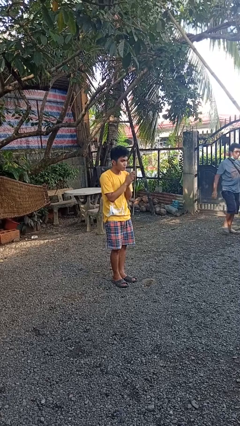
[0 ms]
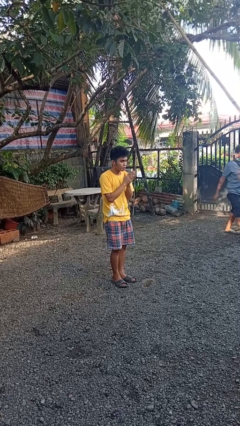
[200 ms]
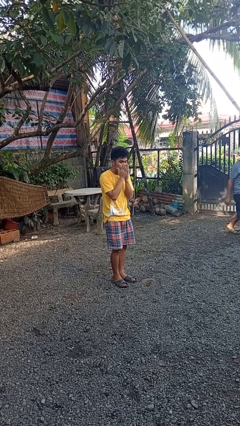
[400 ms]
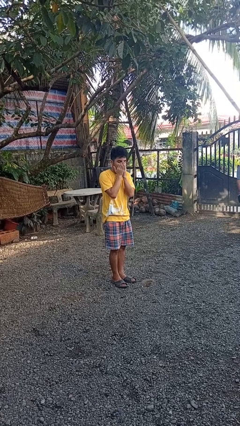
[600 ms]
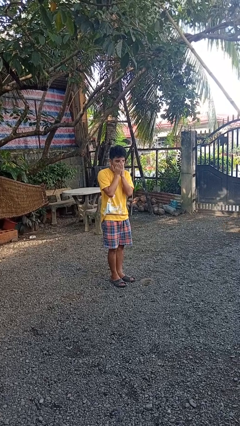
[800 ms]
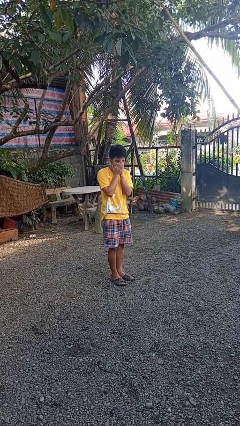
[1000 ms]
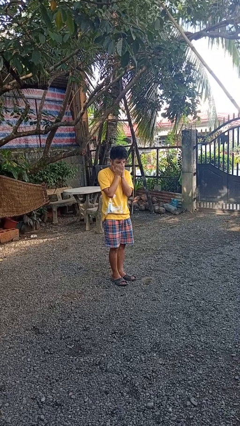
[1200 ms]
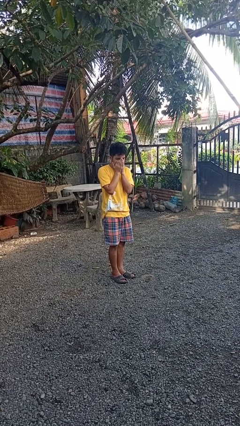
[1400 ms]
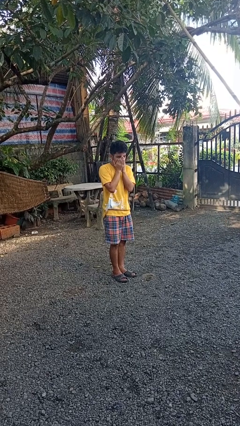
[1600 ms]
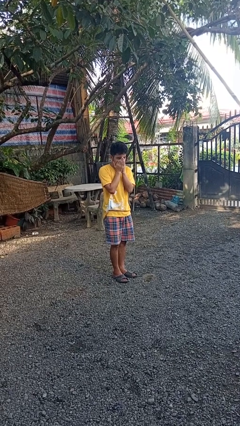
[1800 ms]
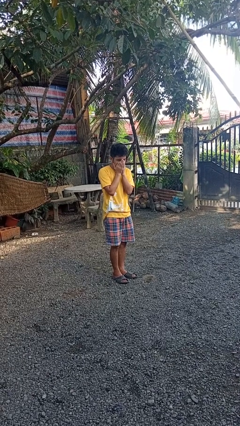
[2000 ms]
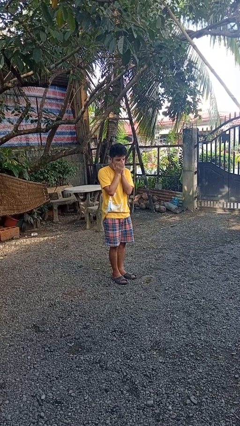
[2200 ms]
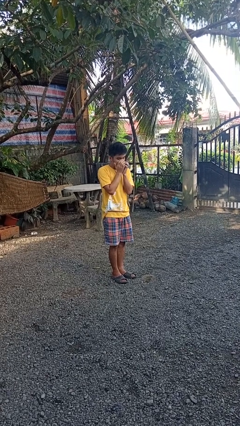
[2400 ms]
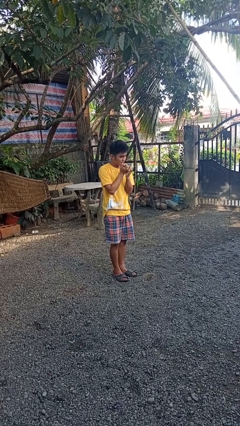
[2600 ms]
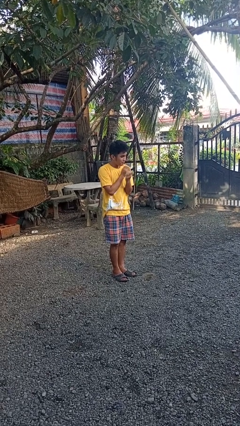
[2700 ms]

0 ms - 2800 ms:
person blows into hands

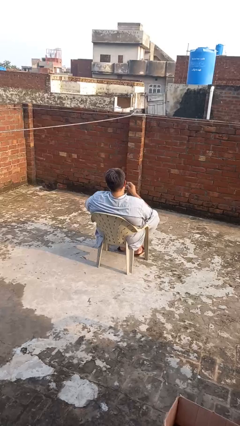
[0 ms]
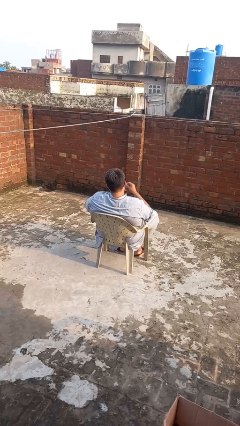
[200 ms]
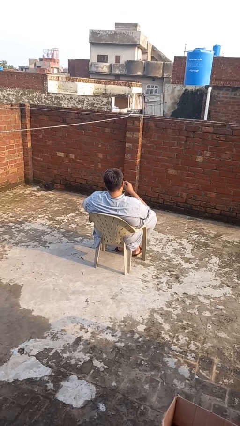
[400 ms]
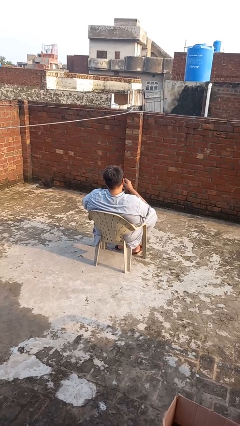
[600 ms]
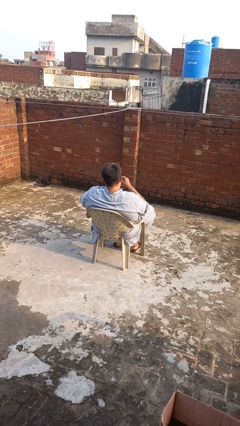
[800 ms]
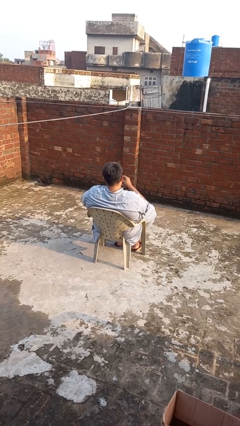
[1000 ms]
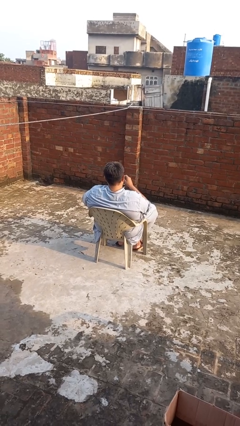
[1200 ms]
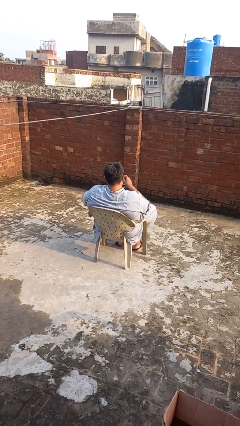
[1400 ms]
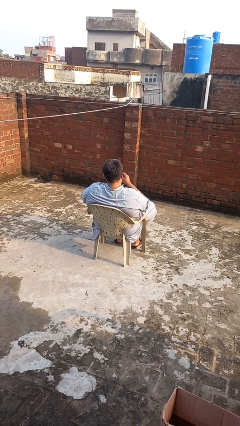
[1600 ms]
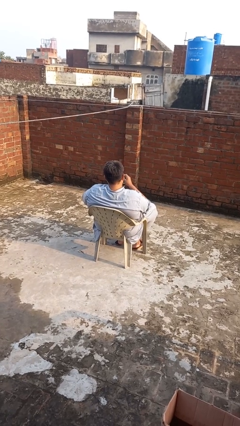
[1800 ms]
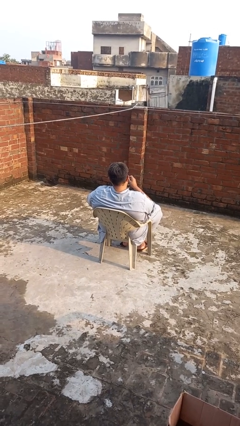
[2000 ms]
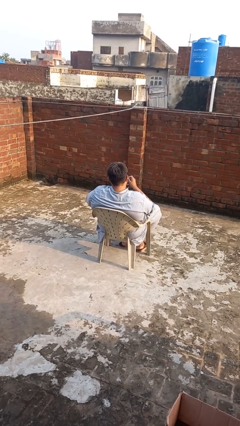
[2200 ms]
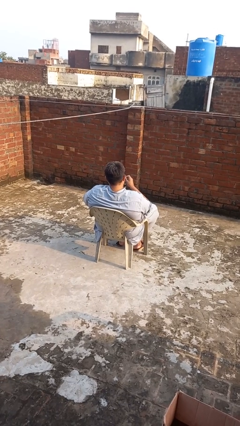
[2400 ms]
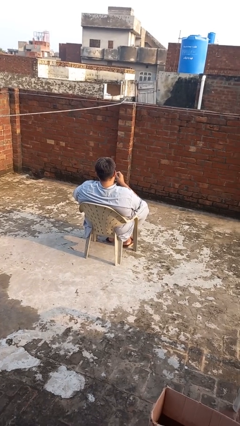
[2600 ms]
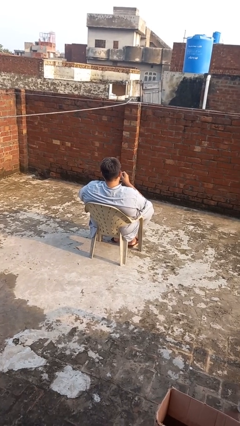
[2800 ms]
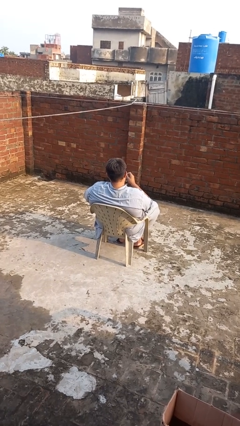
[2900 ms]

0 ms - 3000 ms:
person stirs mug

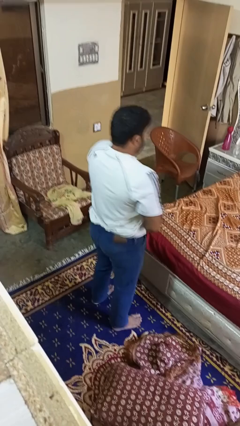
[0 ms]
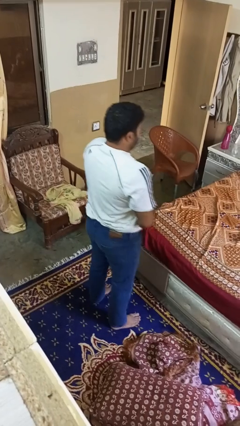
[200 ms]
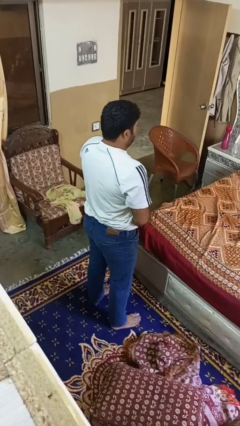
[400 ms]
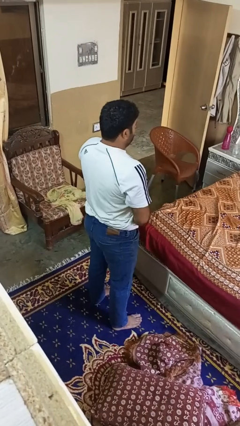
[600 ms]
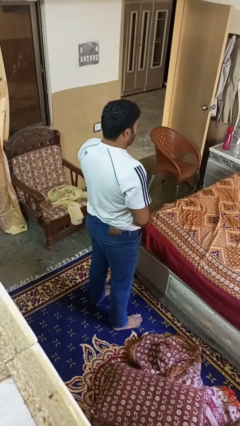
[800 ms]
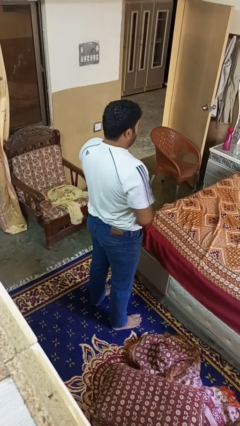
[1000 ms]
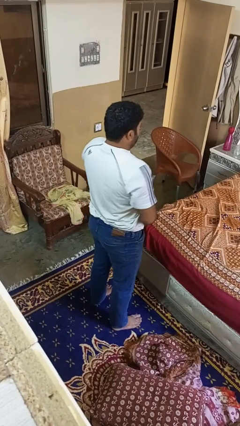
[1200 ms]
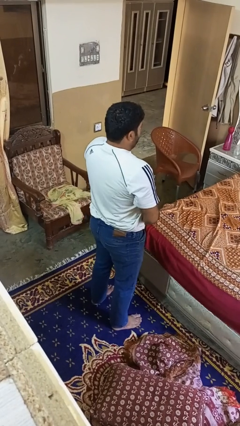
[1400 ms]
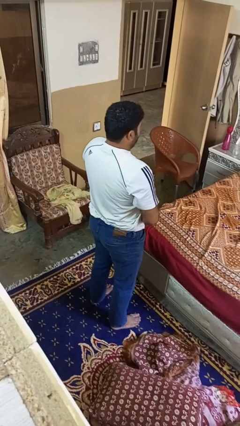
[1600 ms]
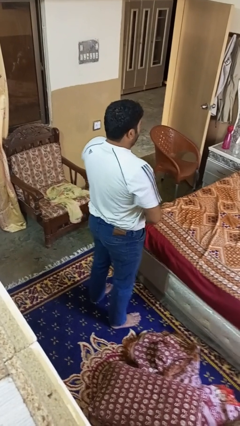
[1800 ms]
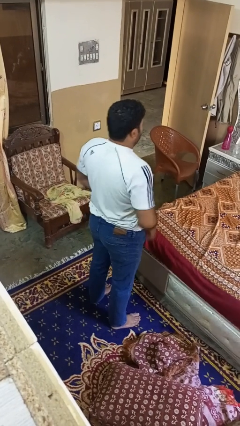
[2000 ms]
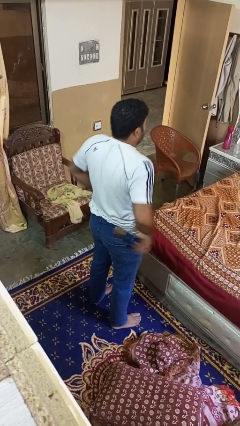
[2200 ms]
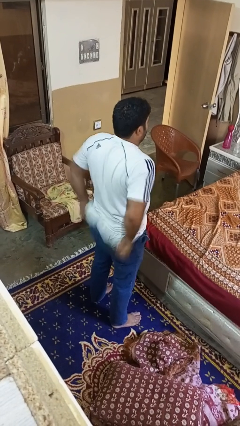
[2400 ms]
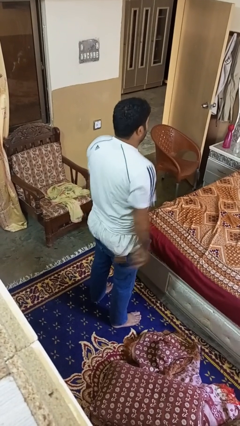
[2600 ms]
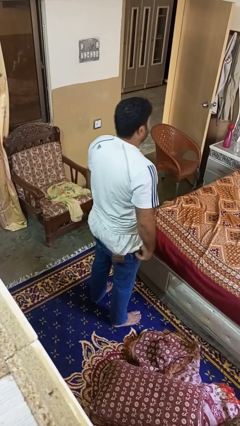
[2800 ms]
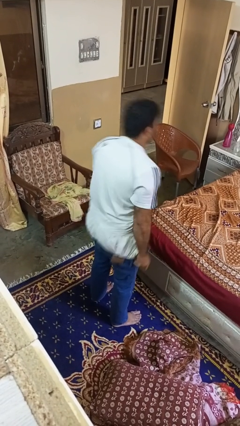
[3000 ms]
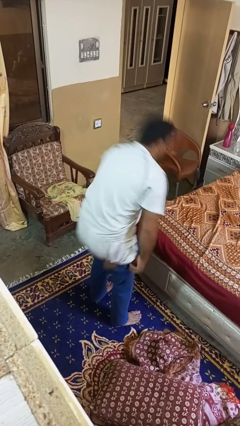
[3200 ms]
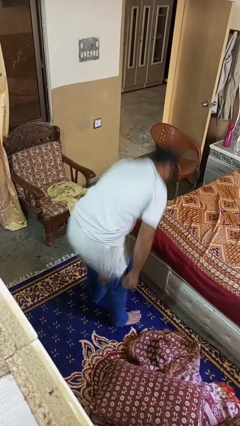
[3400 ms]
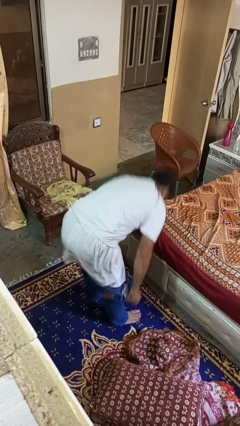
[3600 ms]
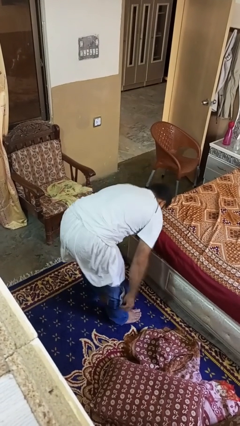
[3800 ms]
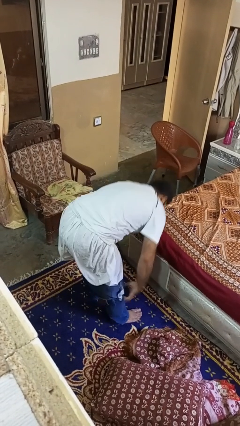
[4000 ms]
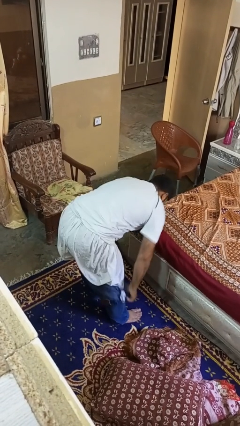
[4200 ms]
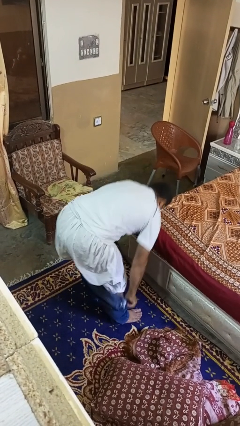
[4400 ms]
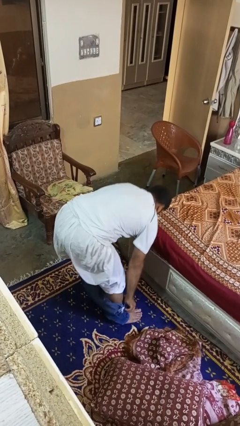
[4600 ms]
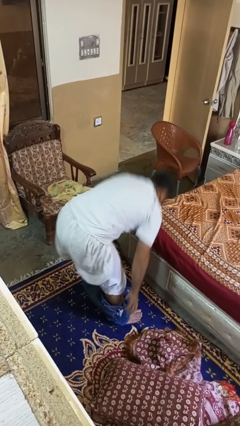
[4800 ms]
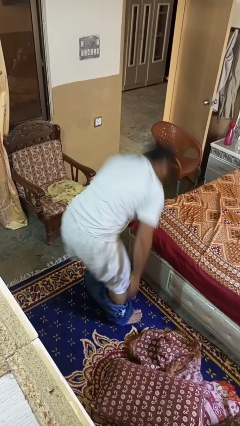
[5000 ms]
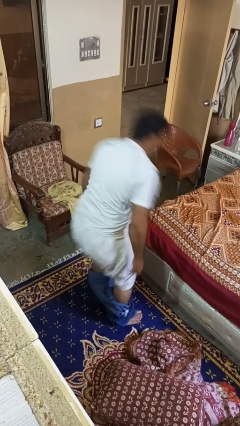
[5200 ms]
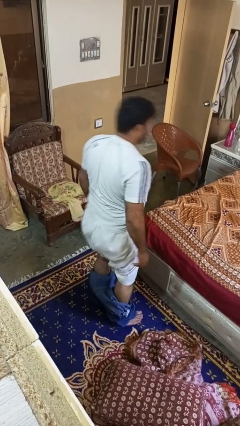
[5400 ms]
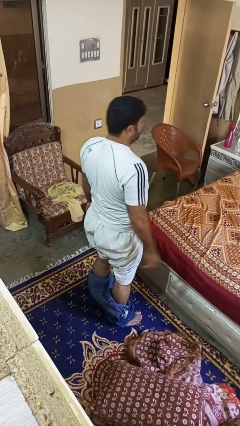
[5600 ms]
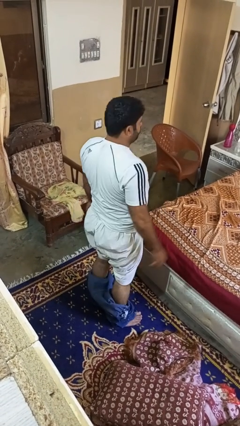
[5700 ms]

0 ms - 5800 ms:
person takes off pants

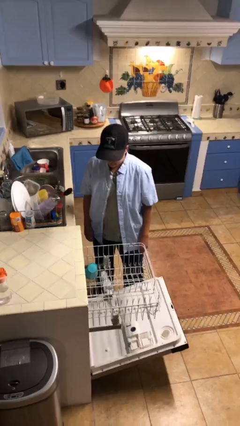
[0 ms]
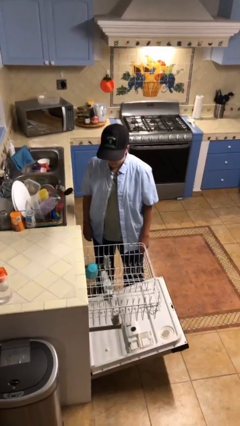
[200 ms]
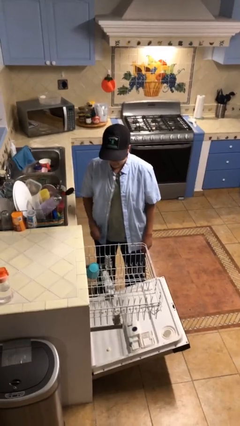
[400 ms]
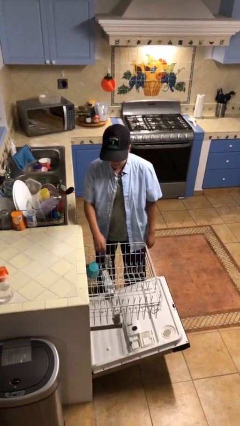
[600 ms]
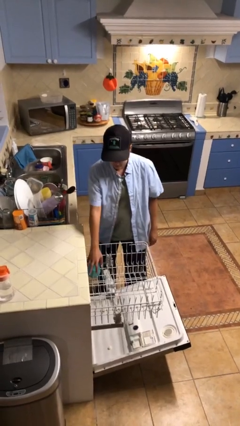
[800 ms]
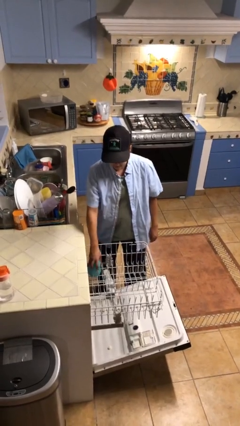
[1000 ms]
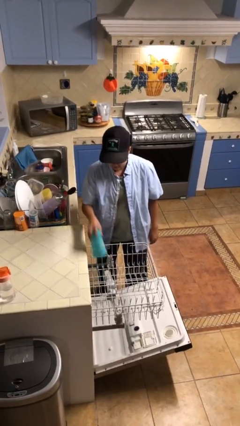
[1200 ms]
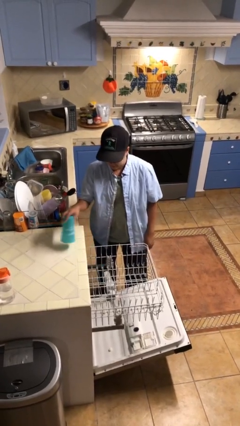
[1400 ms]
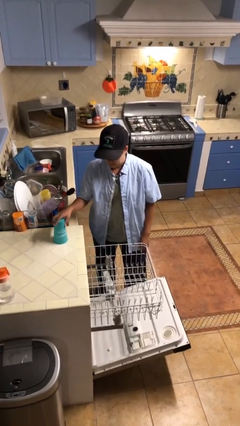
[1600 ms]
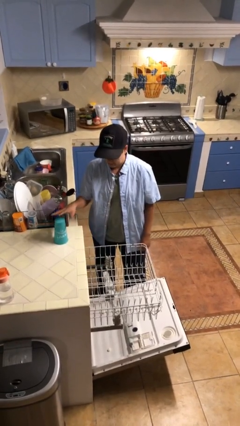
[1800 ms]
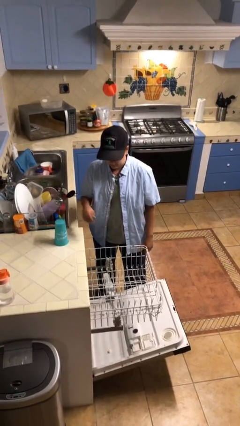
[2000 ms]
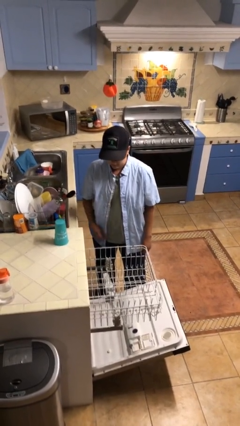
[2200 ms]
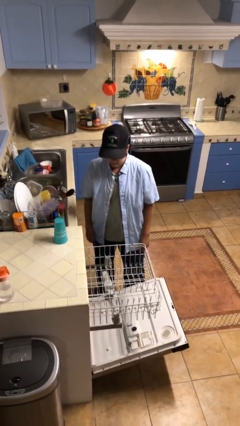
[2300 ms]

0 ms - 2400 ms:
person unloads dishwasher

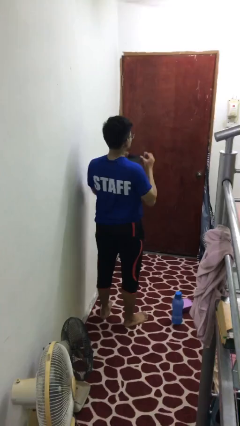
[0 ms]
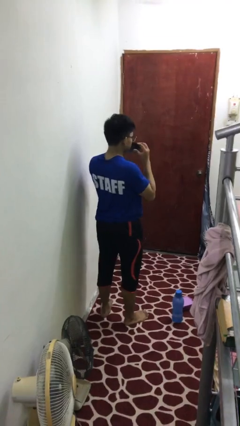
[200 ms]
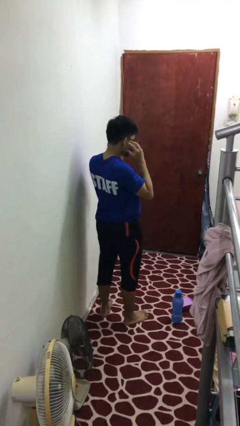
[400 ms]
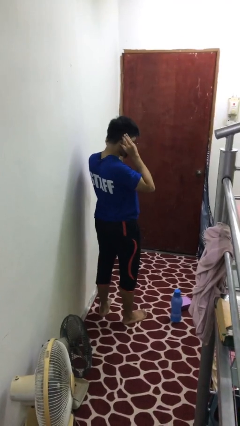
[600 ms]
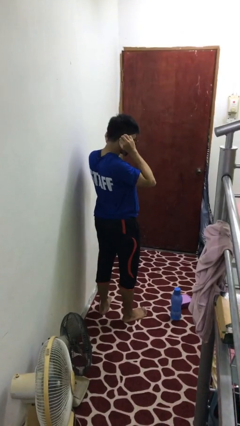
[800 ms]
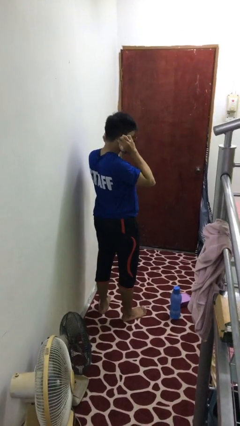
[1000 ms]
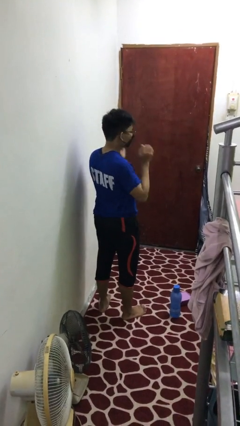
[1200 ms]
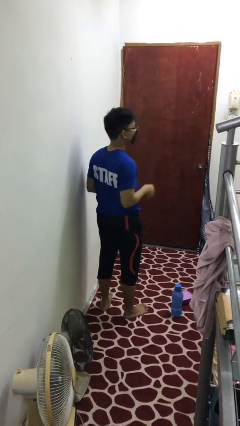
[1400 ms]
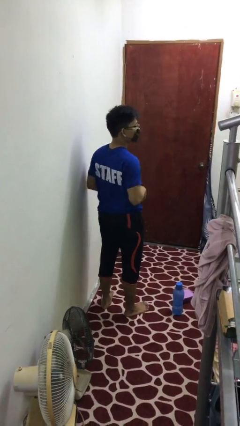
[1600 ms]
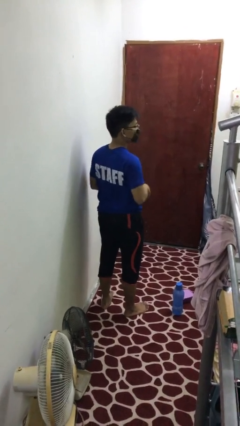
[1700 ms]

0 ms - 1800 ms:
person puts on facemask

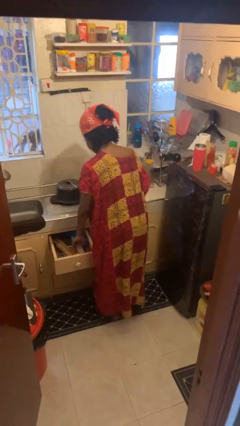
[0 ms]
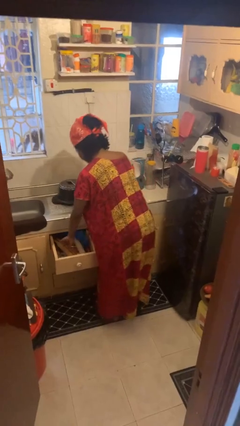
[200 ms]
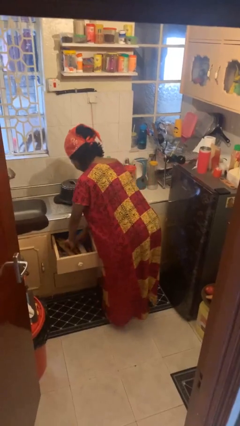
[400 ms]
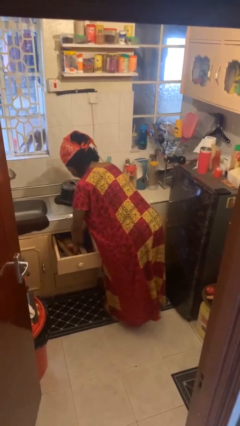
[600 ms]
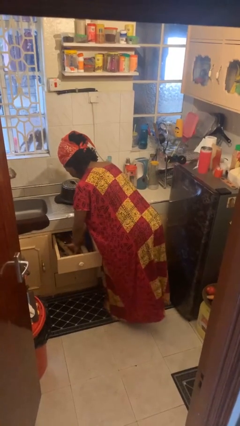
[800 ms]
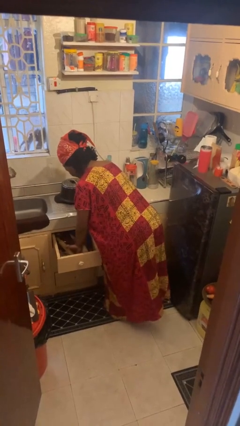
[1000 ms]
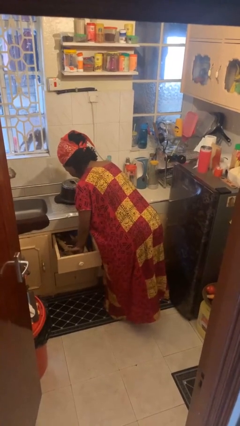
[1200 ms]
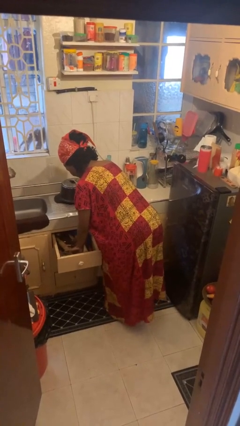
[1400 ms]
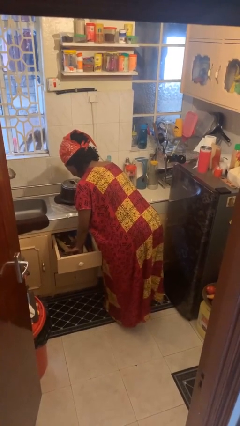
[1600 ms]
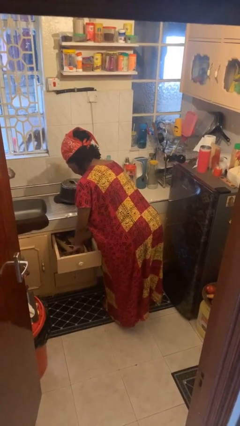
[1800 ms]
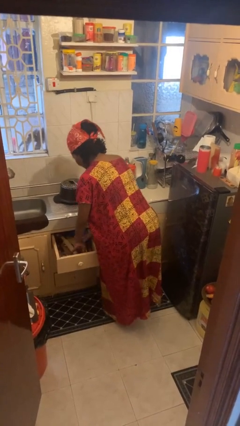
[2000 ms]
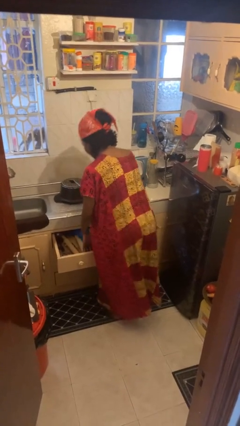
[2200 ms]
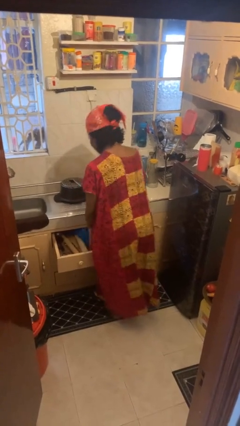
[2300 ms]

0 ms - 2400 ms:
person searches in kitchen drawer
